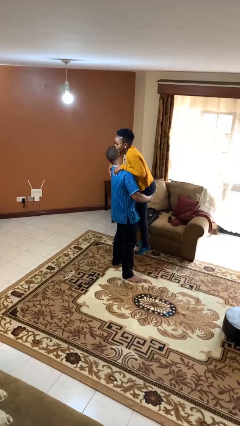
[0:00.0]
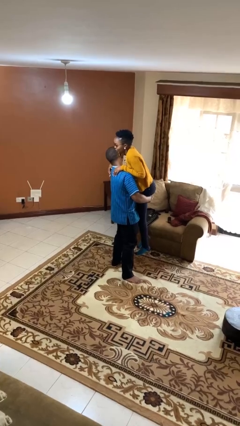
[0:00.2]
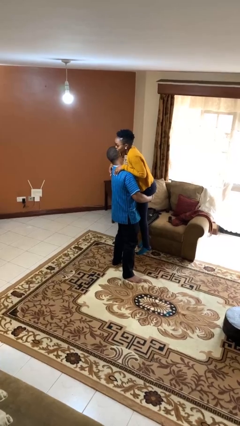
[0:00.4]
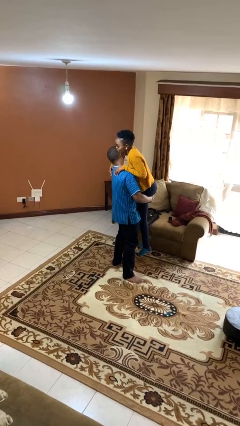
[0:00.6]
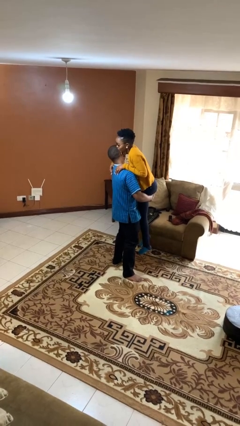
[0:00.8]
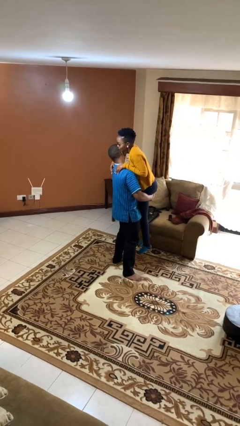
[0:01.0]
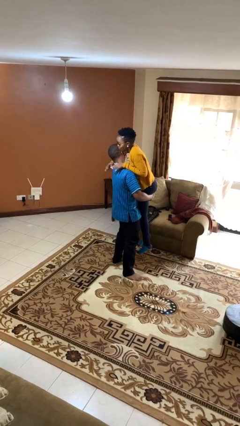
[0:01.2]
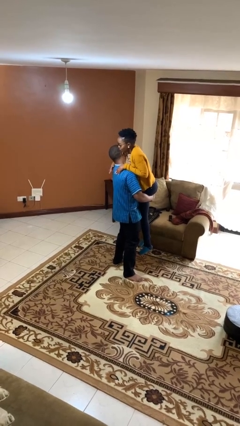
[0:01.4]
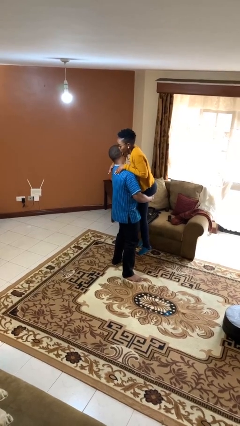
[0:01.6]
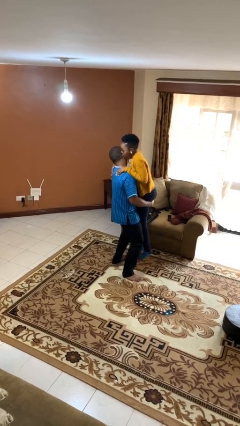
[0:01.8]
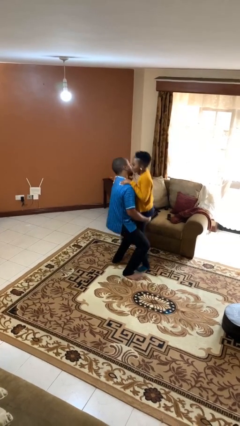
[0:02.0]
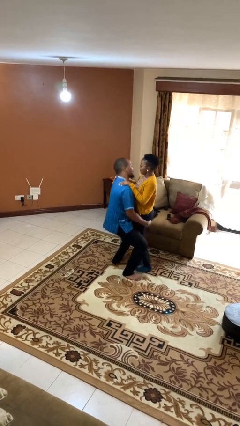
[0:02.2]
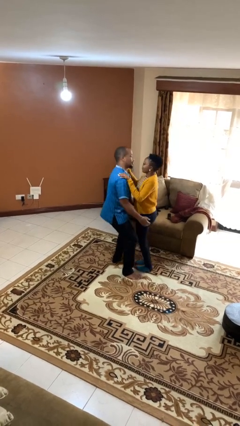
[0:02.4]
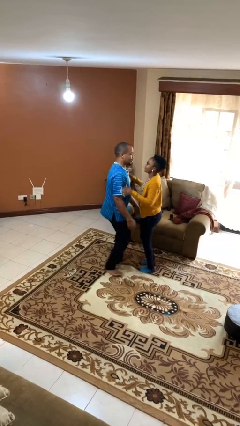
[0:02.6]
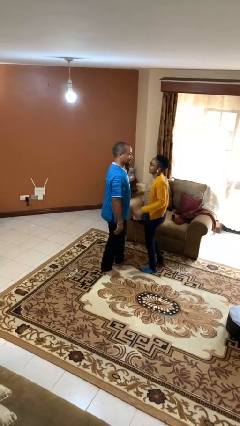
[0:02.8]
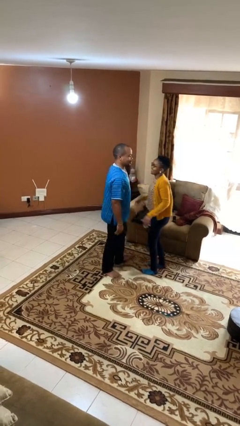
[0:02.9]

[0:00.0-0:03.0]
person puts down person

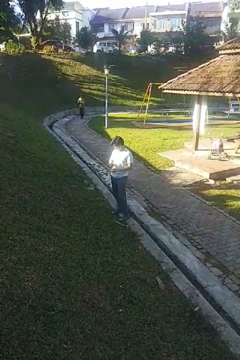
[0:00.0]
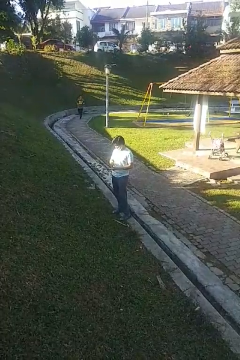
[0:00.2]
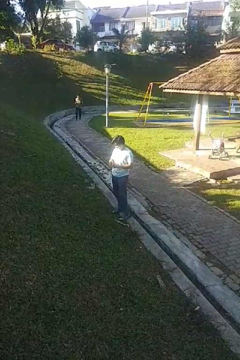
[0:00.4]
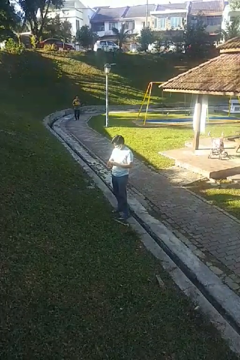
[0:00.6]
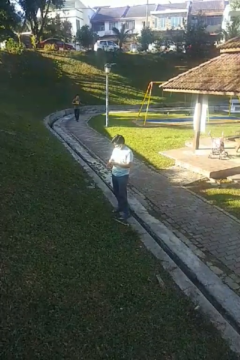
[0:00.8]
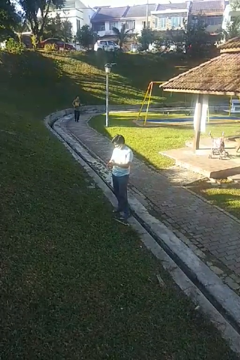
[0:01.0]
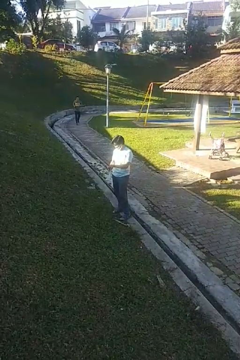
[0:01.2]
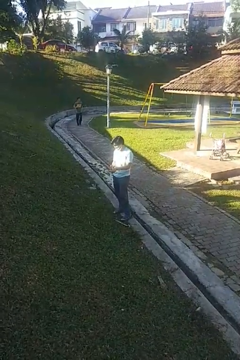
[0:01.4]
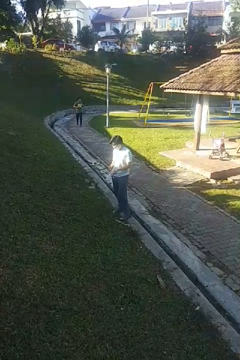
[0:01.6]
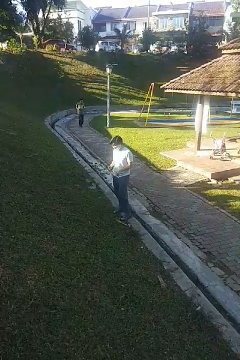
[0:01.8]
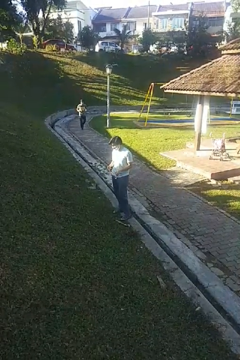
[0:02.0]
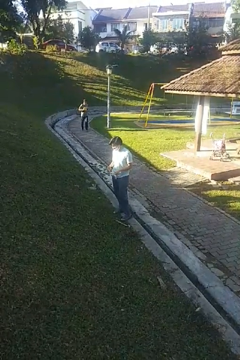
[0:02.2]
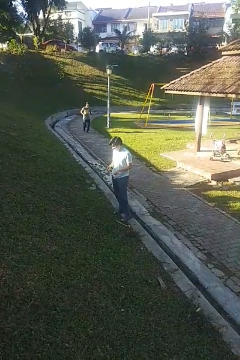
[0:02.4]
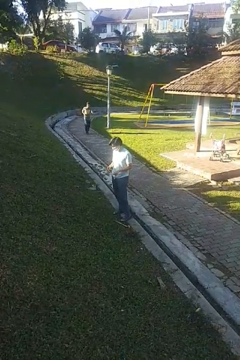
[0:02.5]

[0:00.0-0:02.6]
person takes off wristwatch

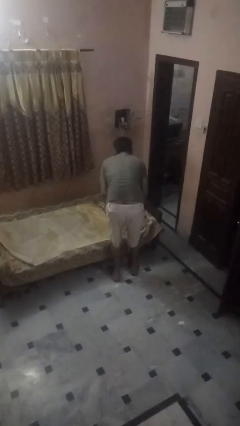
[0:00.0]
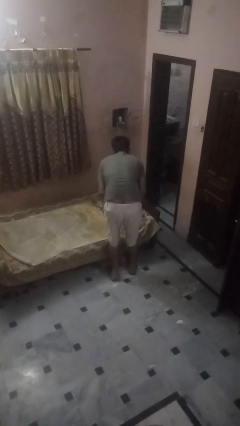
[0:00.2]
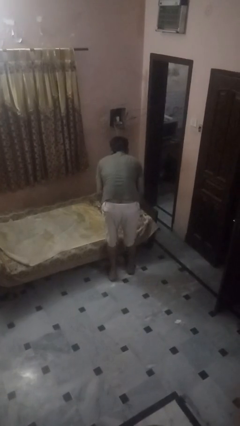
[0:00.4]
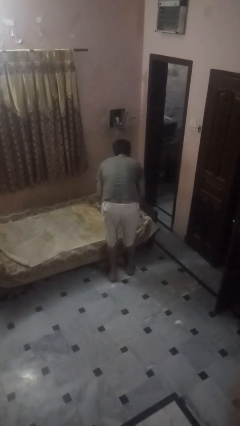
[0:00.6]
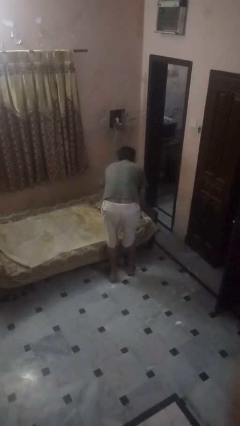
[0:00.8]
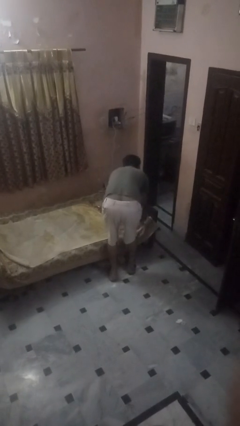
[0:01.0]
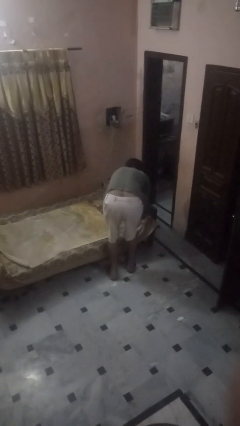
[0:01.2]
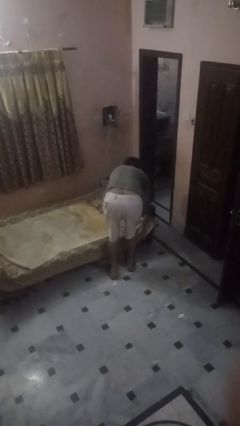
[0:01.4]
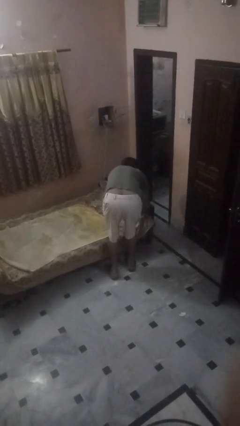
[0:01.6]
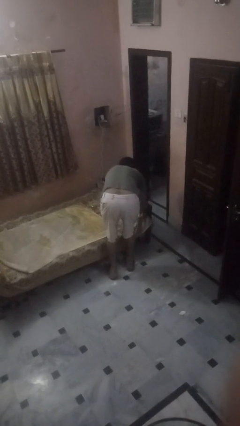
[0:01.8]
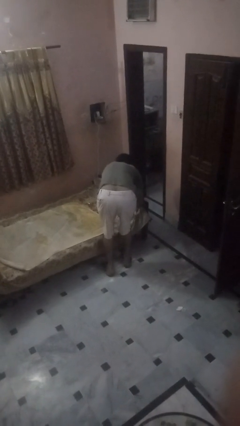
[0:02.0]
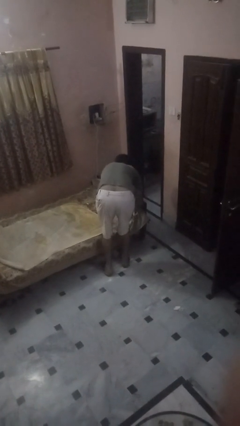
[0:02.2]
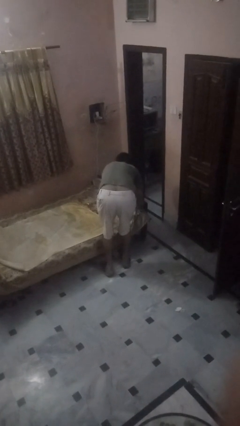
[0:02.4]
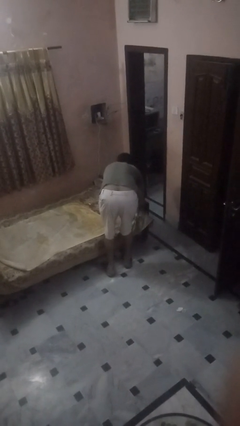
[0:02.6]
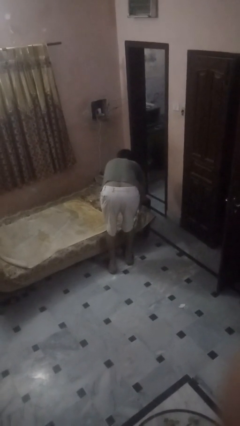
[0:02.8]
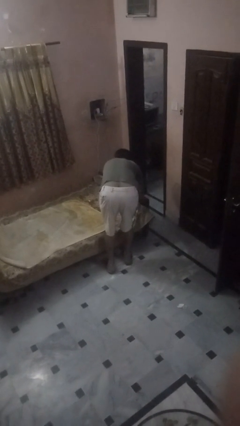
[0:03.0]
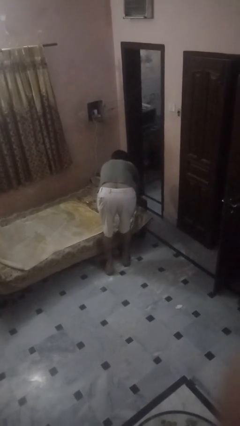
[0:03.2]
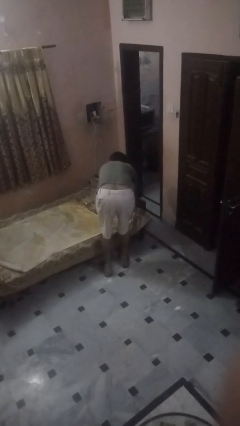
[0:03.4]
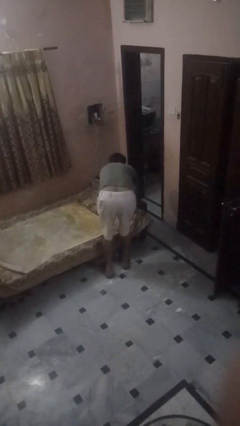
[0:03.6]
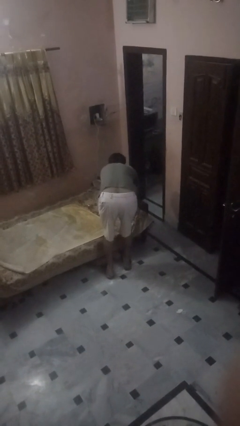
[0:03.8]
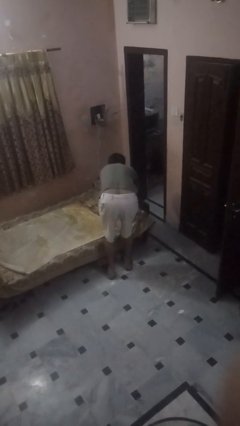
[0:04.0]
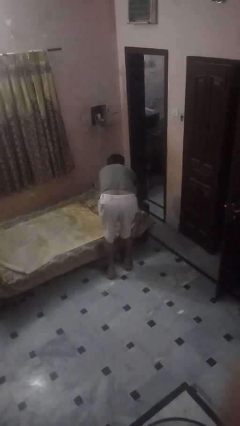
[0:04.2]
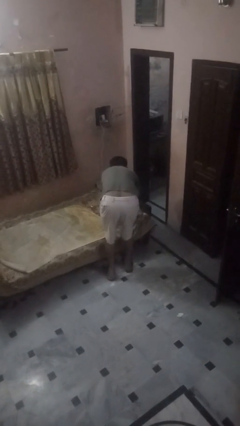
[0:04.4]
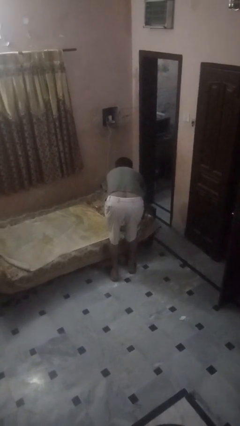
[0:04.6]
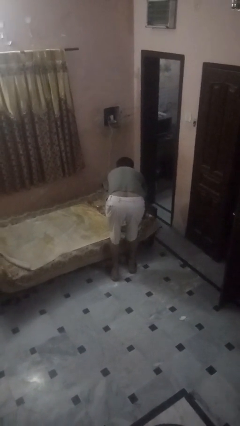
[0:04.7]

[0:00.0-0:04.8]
person makes bed

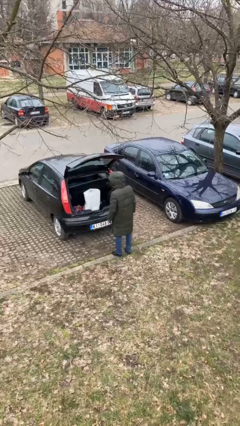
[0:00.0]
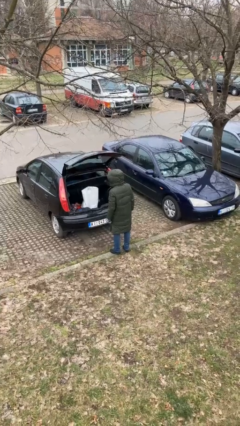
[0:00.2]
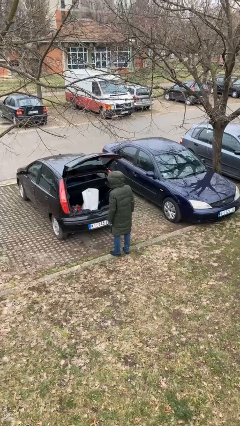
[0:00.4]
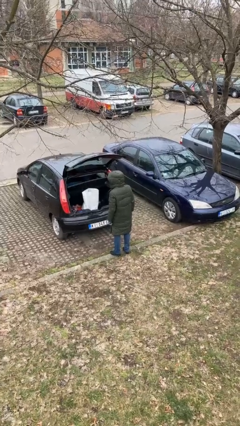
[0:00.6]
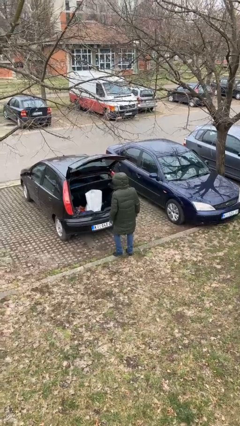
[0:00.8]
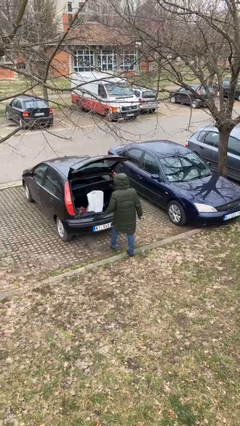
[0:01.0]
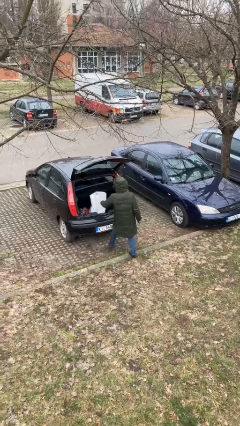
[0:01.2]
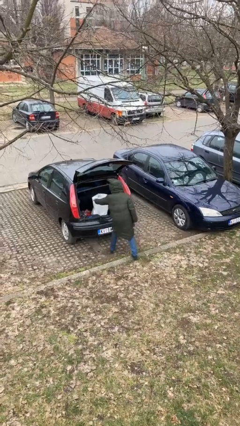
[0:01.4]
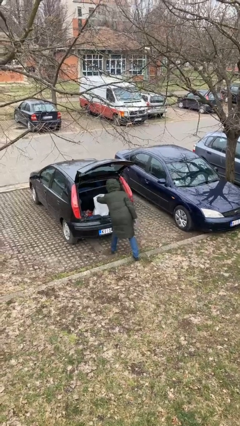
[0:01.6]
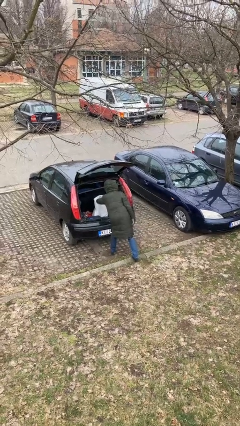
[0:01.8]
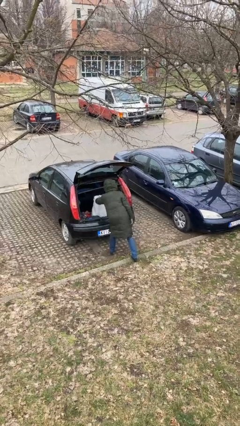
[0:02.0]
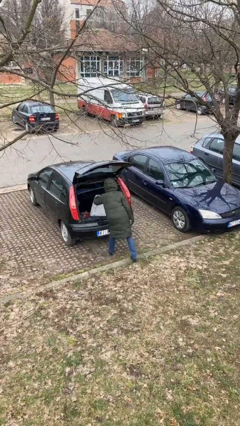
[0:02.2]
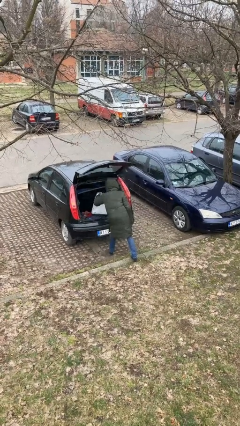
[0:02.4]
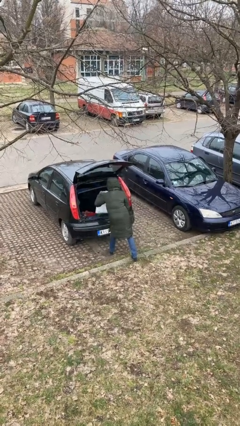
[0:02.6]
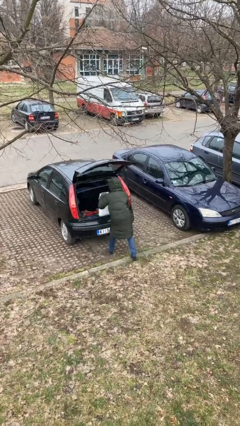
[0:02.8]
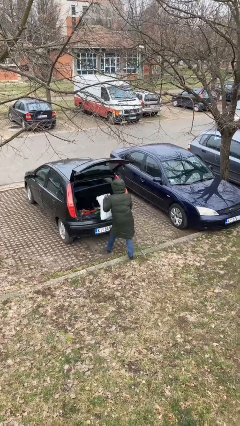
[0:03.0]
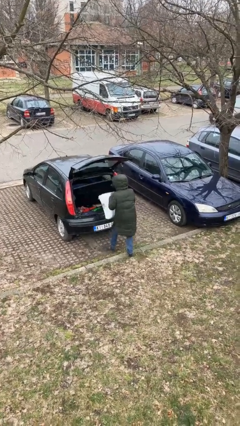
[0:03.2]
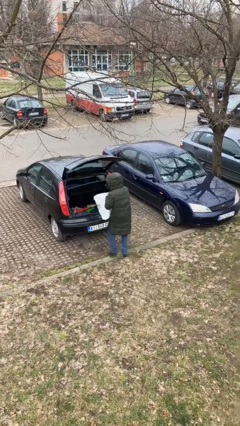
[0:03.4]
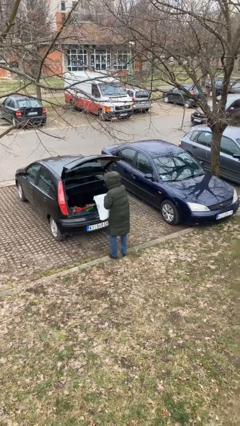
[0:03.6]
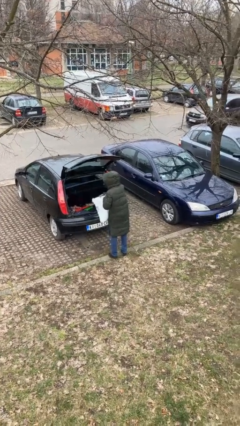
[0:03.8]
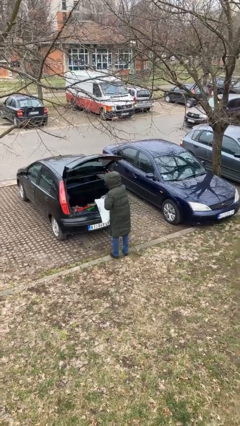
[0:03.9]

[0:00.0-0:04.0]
person unloads car

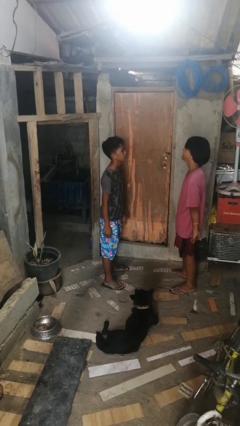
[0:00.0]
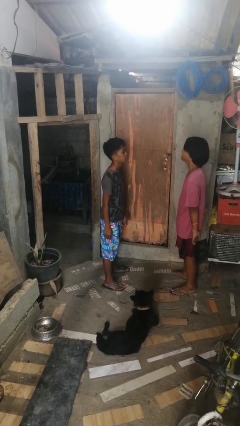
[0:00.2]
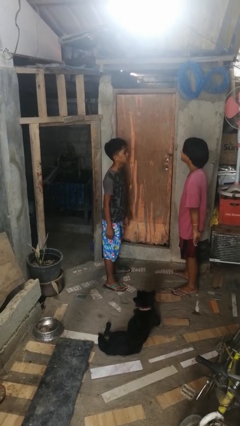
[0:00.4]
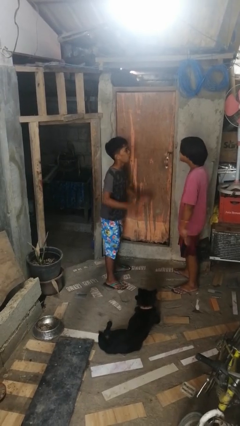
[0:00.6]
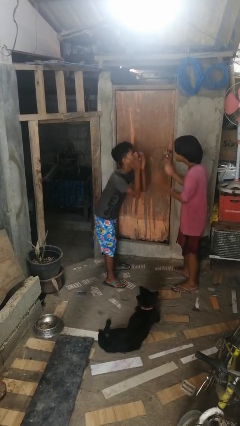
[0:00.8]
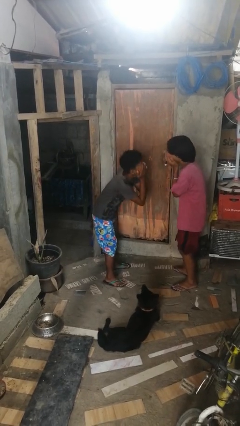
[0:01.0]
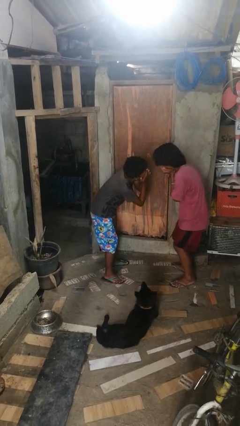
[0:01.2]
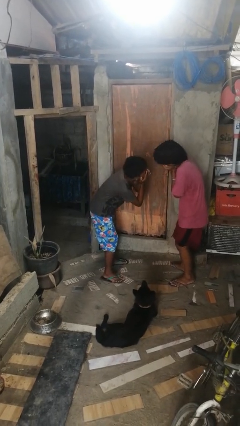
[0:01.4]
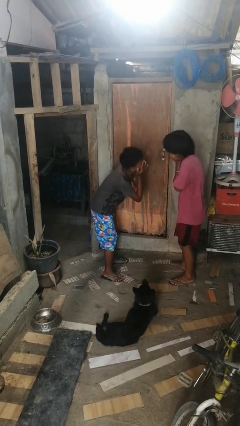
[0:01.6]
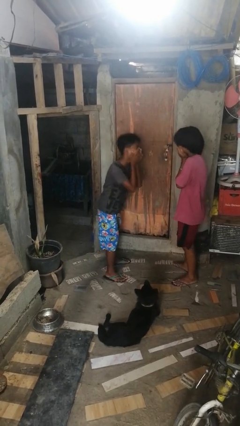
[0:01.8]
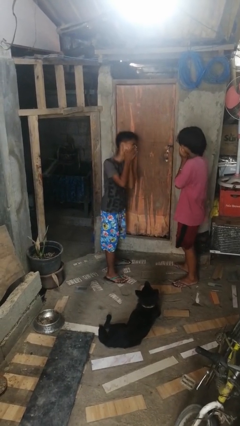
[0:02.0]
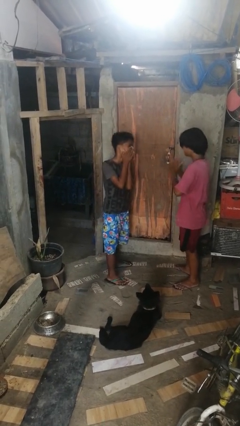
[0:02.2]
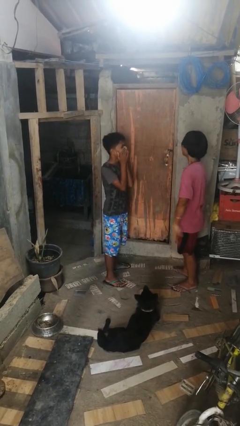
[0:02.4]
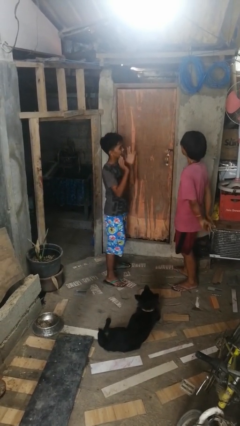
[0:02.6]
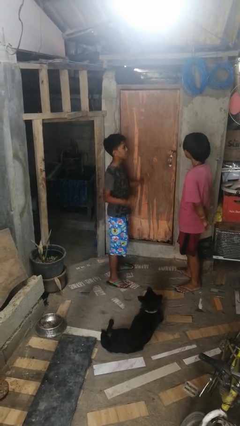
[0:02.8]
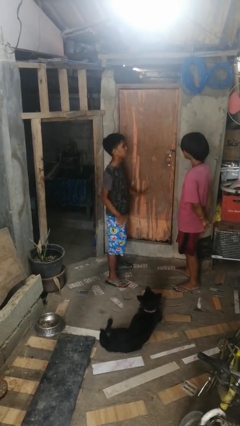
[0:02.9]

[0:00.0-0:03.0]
person laughs with person

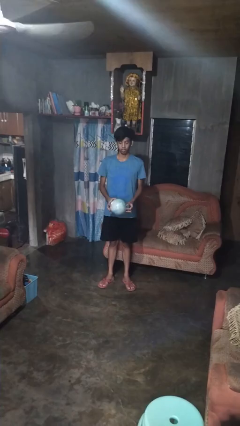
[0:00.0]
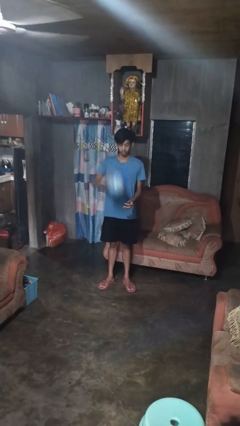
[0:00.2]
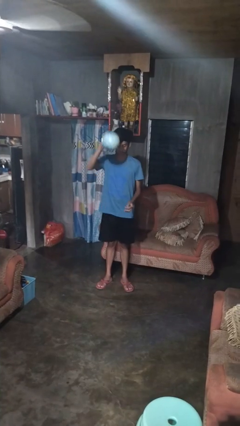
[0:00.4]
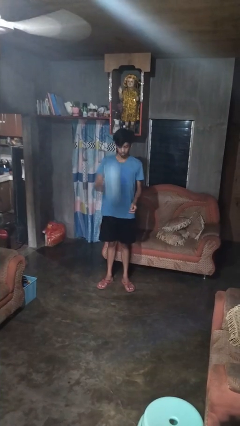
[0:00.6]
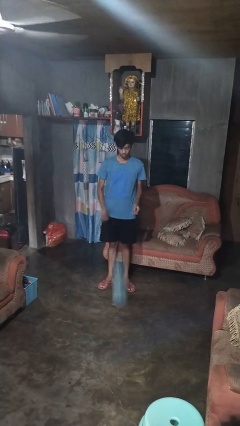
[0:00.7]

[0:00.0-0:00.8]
person bounces ball on floor
